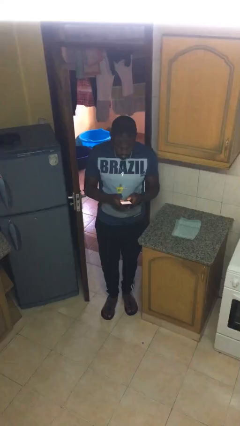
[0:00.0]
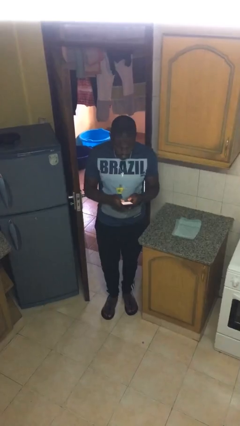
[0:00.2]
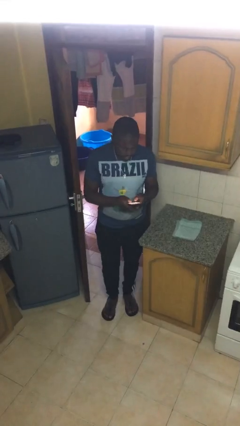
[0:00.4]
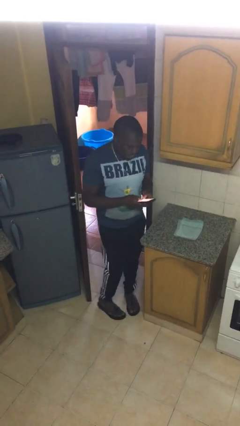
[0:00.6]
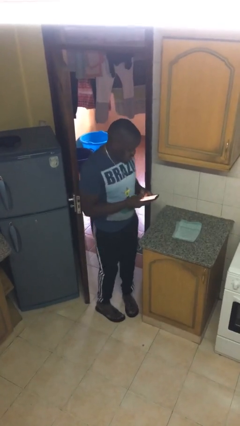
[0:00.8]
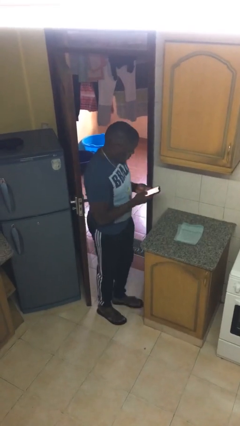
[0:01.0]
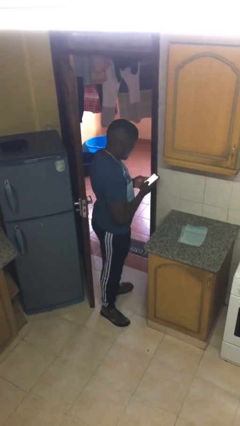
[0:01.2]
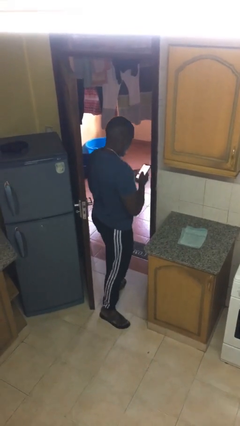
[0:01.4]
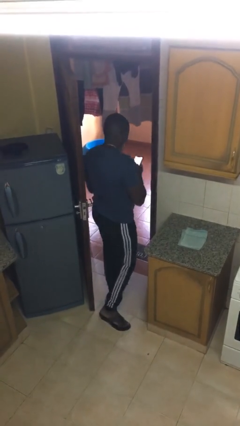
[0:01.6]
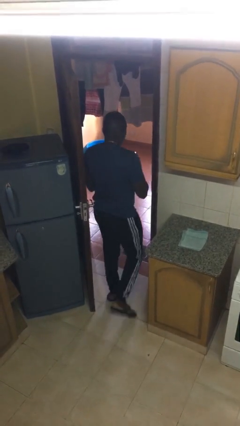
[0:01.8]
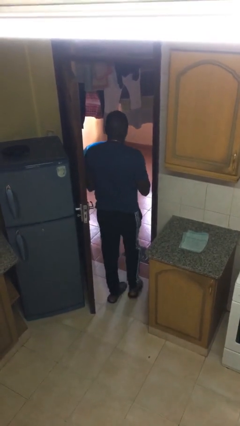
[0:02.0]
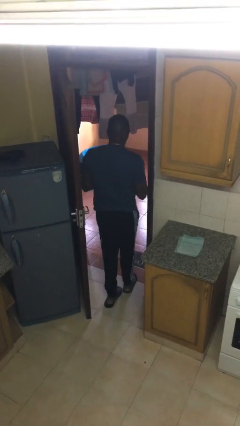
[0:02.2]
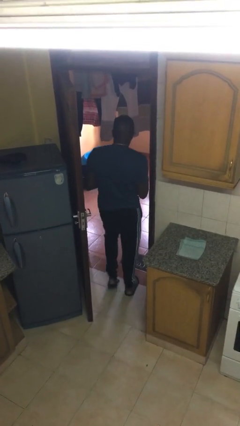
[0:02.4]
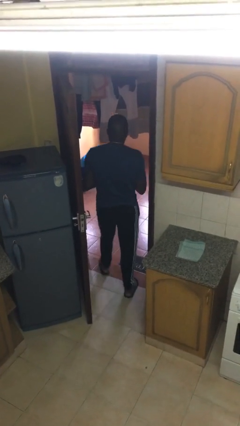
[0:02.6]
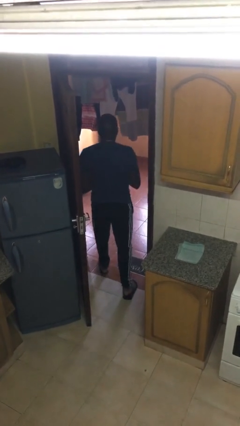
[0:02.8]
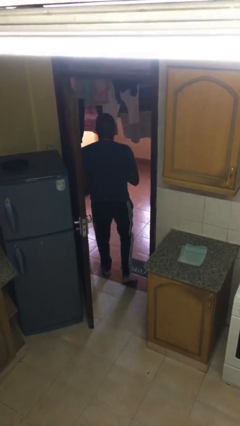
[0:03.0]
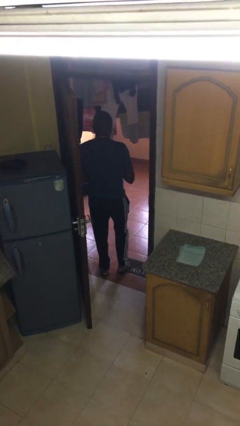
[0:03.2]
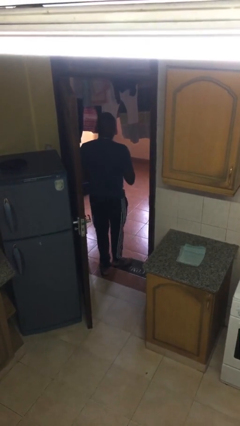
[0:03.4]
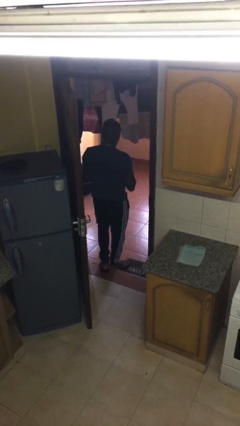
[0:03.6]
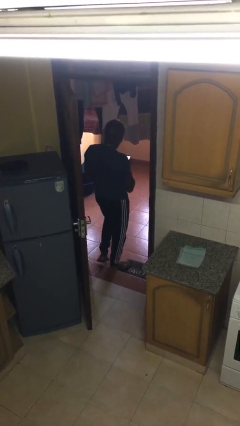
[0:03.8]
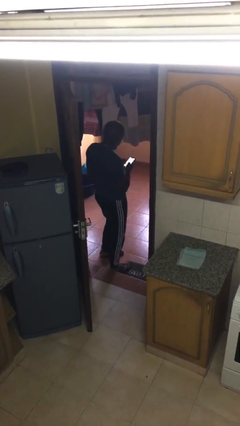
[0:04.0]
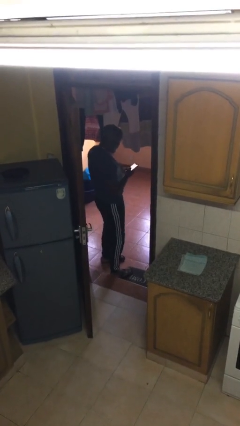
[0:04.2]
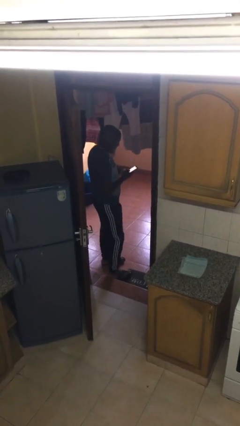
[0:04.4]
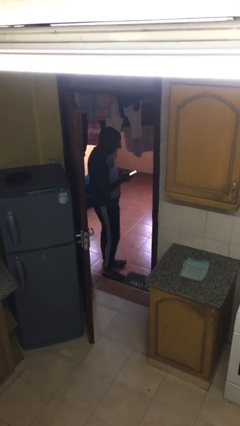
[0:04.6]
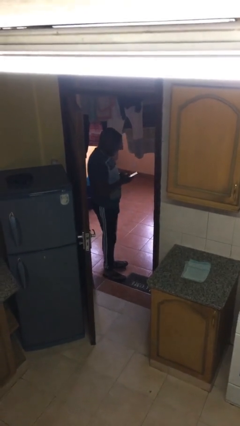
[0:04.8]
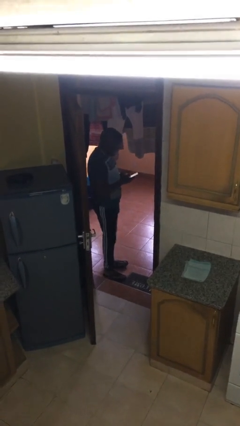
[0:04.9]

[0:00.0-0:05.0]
person exits scene through structure

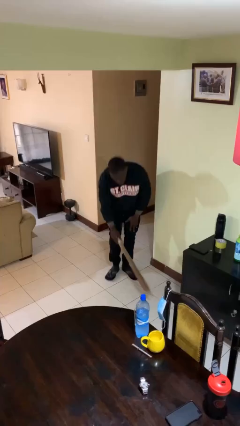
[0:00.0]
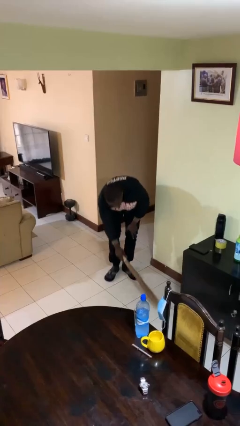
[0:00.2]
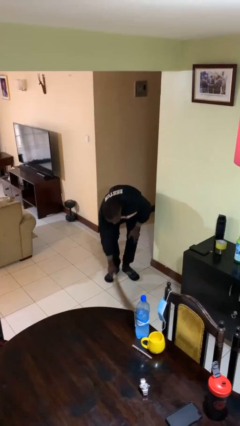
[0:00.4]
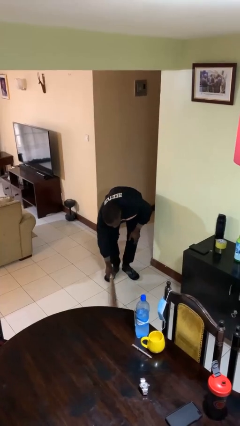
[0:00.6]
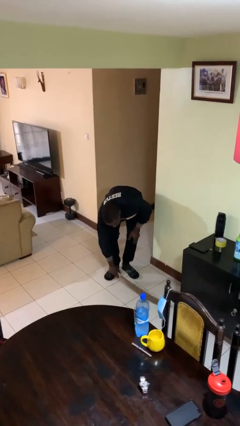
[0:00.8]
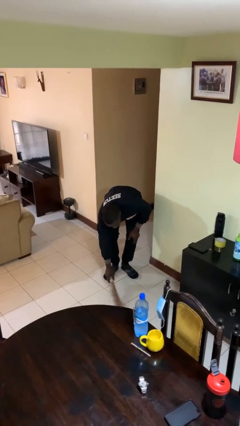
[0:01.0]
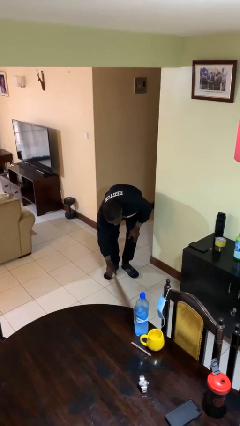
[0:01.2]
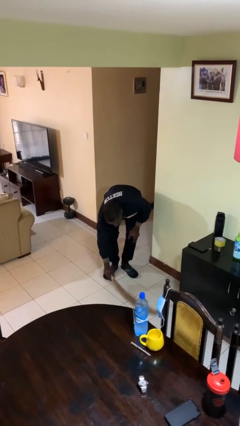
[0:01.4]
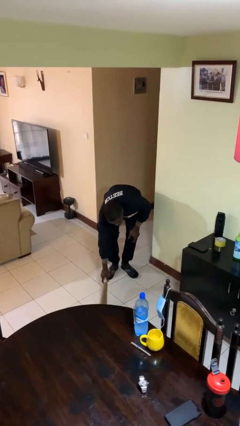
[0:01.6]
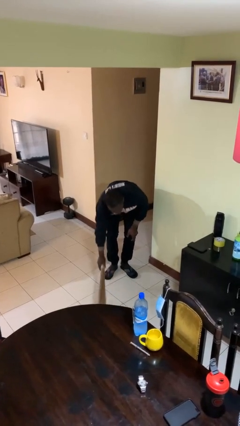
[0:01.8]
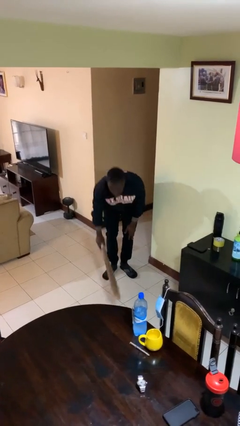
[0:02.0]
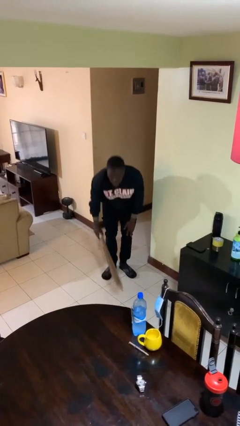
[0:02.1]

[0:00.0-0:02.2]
person sweeps floor

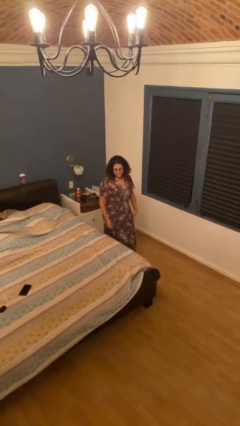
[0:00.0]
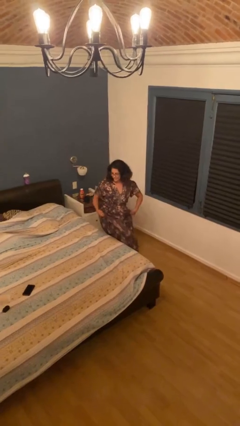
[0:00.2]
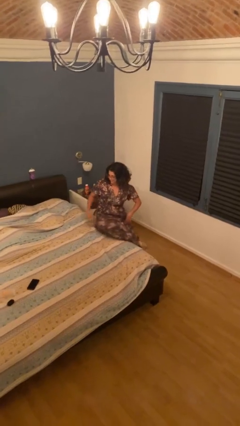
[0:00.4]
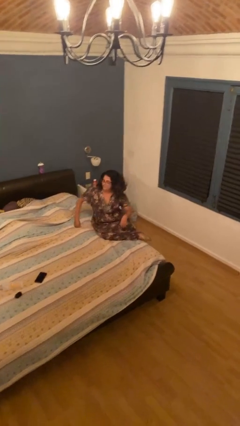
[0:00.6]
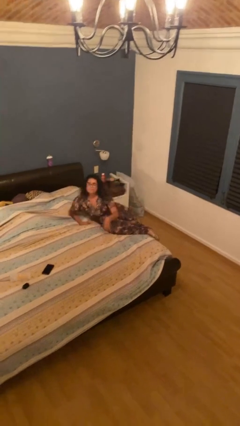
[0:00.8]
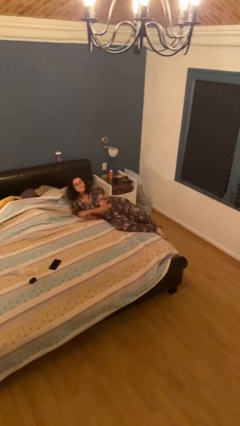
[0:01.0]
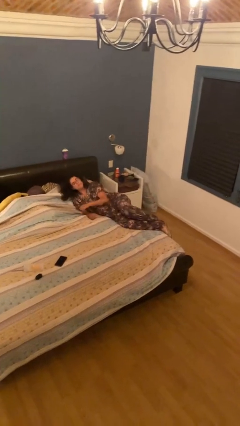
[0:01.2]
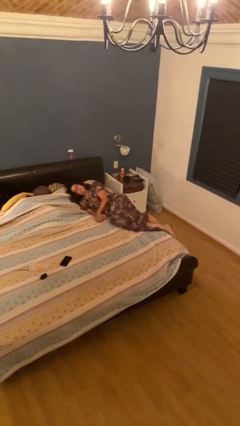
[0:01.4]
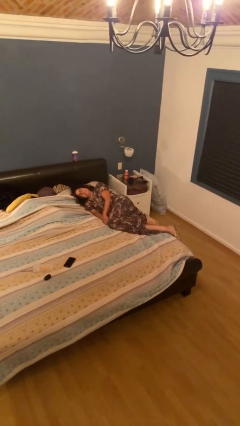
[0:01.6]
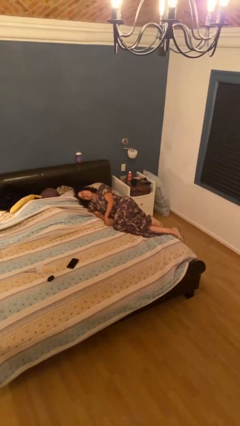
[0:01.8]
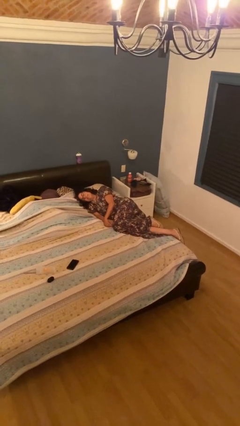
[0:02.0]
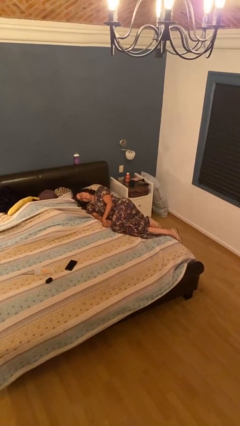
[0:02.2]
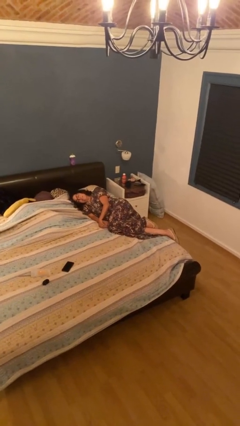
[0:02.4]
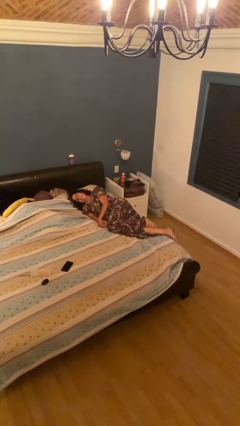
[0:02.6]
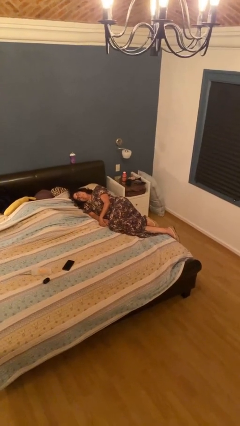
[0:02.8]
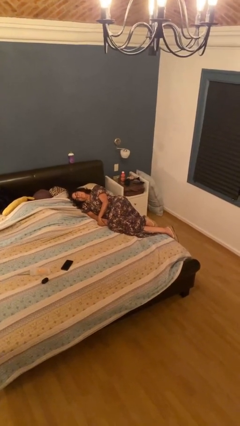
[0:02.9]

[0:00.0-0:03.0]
person lies down on bed

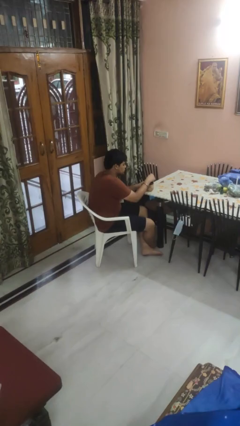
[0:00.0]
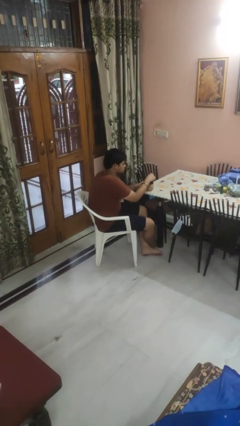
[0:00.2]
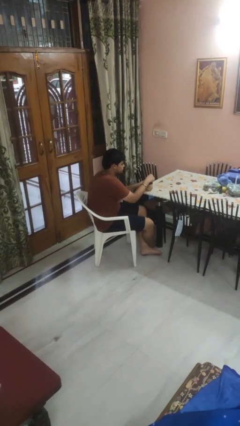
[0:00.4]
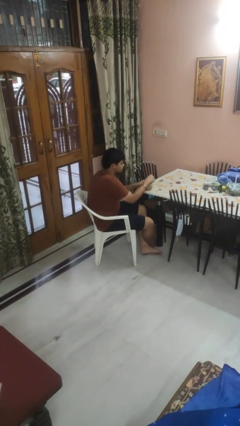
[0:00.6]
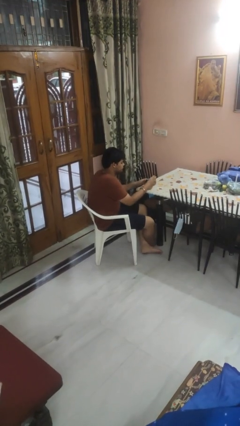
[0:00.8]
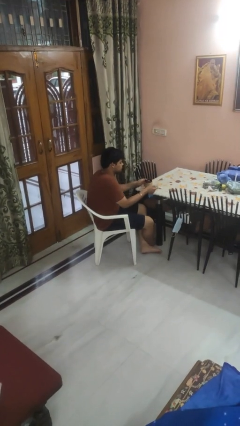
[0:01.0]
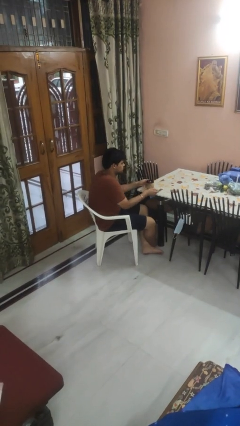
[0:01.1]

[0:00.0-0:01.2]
person stirs mug

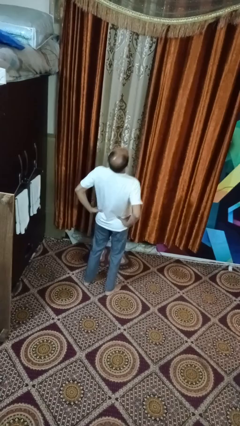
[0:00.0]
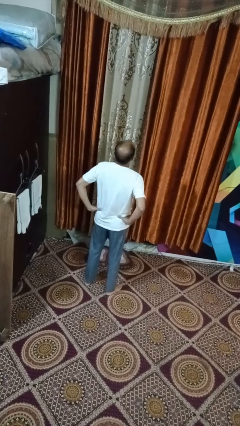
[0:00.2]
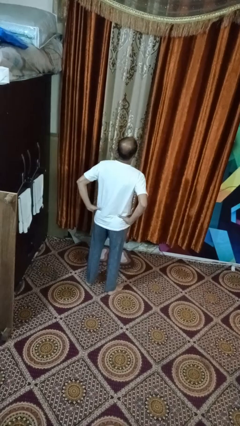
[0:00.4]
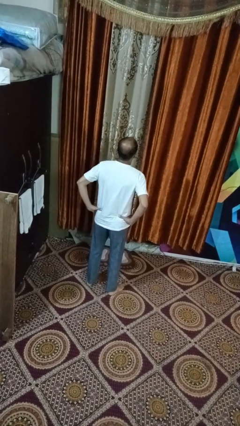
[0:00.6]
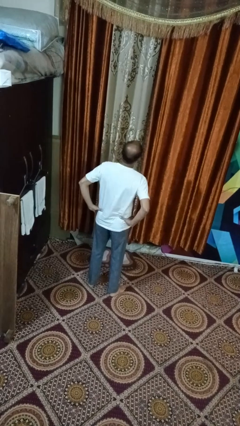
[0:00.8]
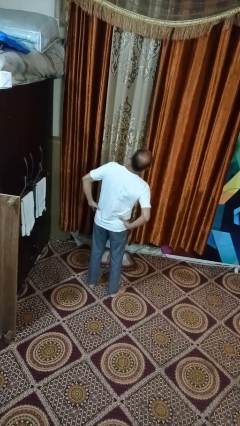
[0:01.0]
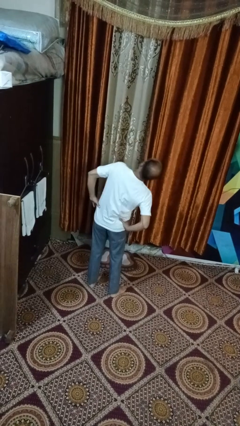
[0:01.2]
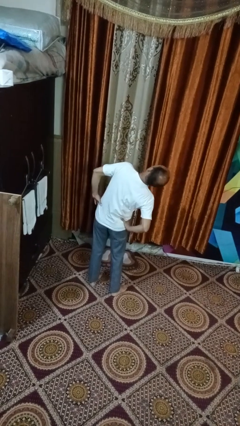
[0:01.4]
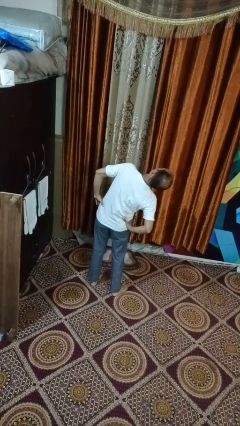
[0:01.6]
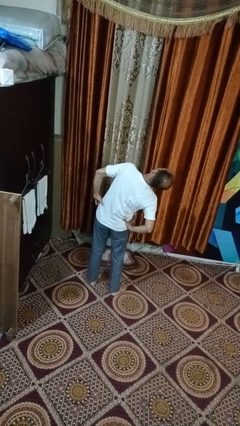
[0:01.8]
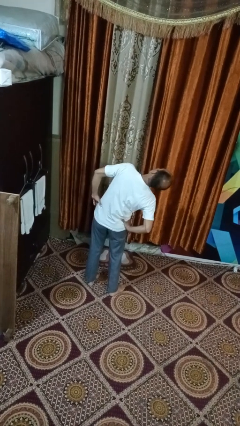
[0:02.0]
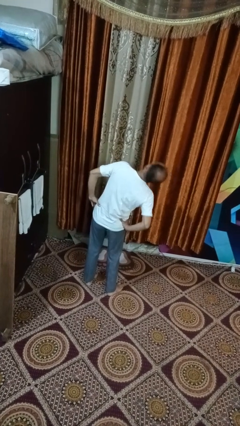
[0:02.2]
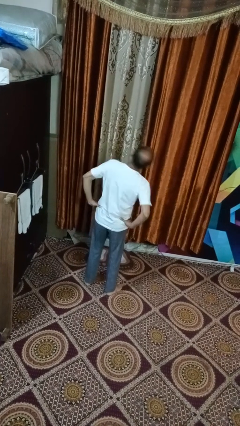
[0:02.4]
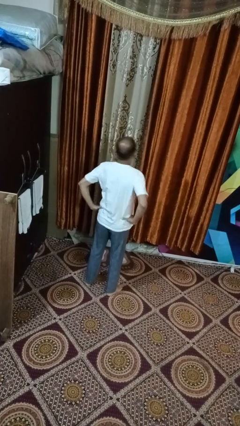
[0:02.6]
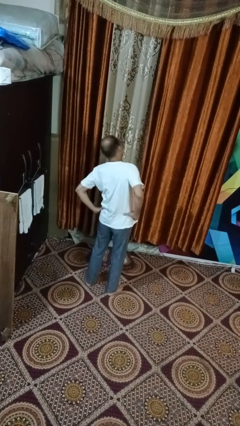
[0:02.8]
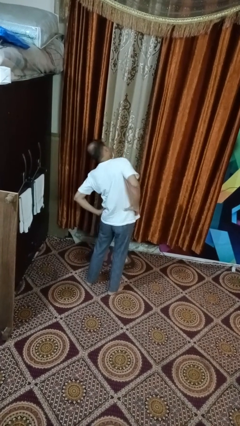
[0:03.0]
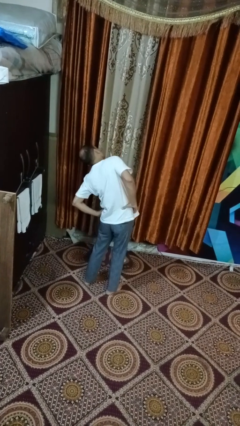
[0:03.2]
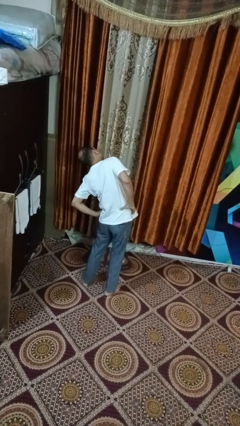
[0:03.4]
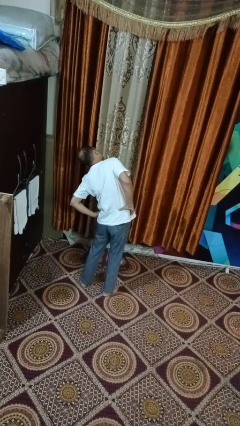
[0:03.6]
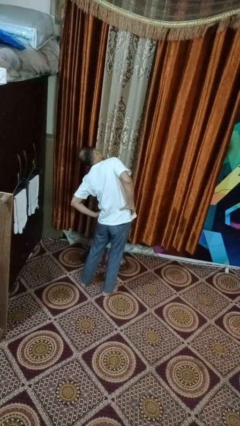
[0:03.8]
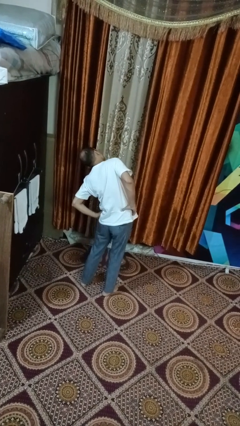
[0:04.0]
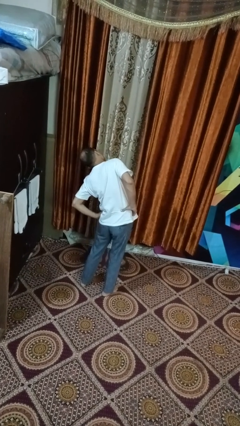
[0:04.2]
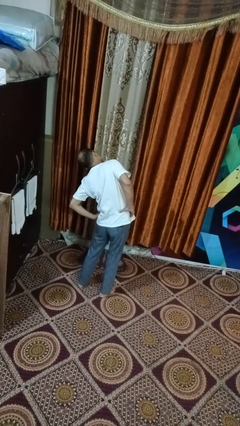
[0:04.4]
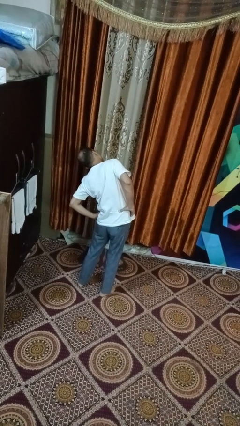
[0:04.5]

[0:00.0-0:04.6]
person stretches arms to side

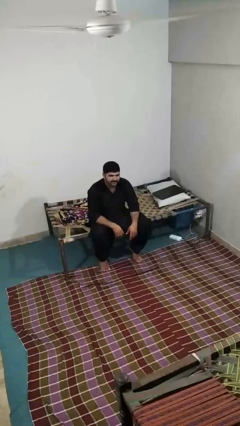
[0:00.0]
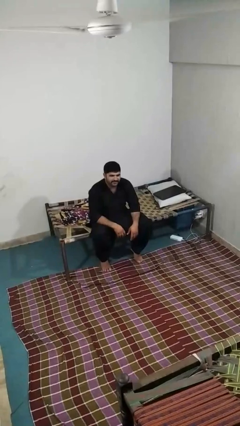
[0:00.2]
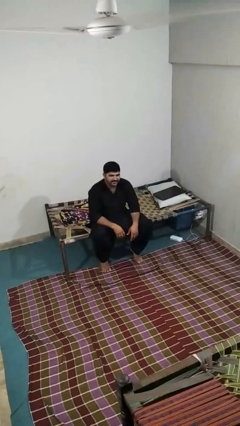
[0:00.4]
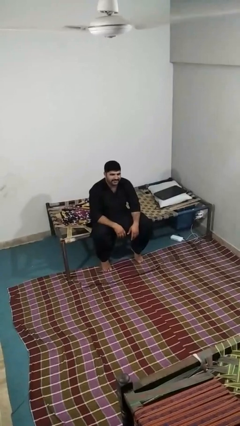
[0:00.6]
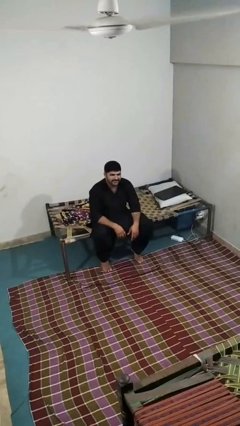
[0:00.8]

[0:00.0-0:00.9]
person gestures come here

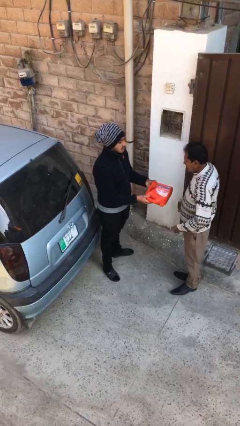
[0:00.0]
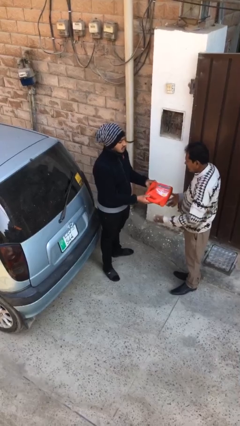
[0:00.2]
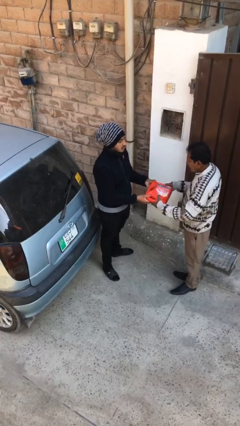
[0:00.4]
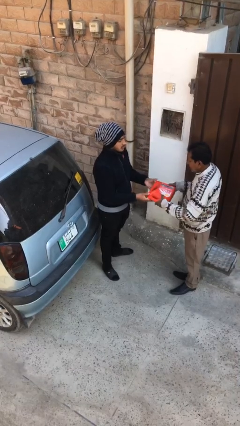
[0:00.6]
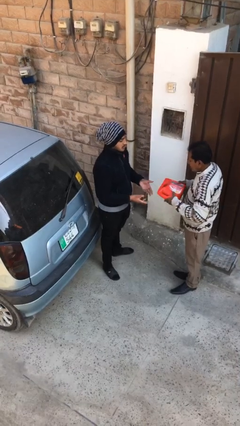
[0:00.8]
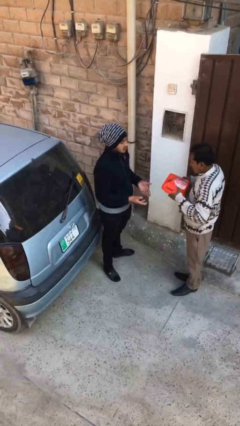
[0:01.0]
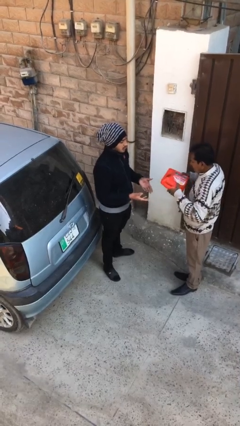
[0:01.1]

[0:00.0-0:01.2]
person transfers object to person
